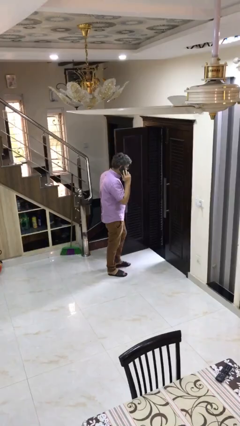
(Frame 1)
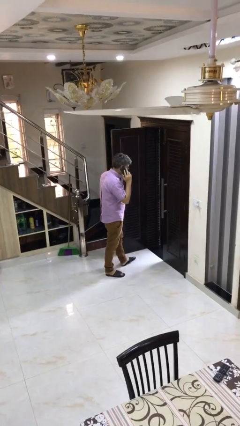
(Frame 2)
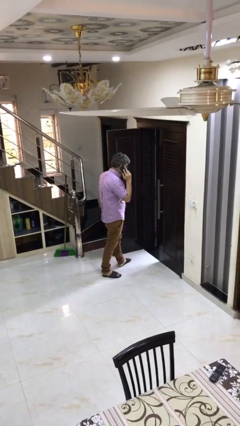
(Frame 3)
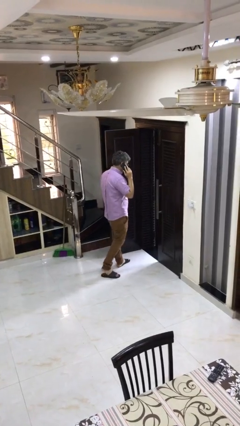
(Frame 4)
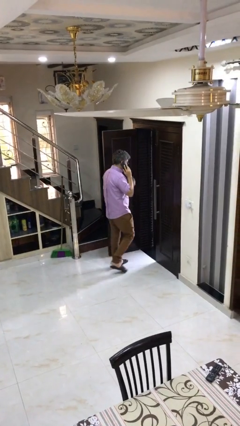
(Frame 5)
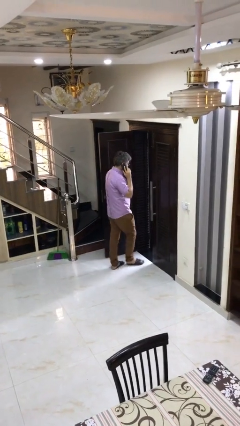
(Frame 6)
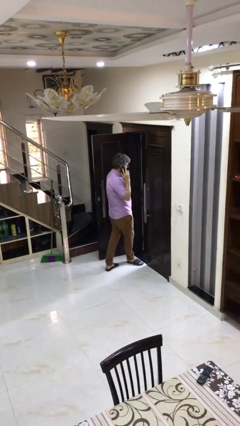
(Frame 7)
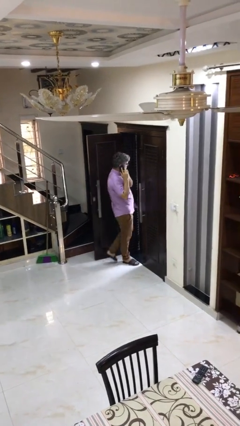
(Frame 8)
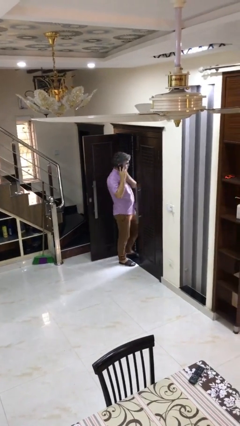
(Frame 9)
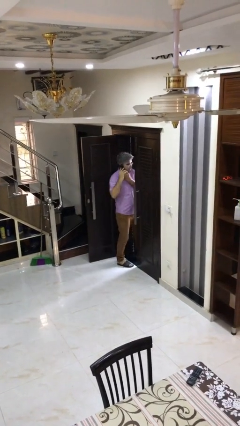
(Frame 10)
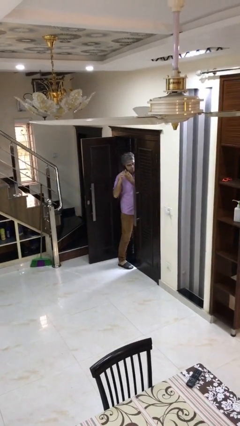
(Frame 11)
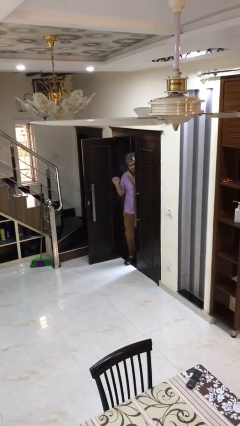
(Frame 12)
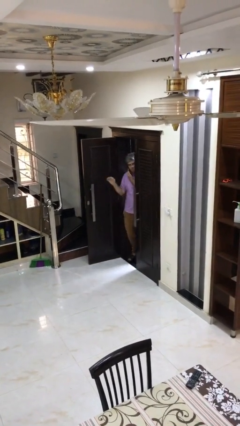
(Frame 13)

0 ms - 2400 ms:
person exits scene through structure

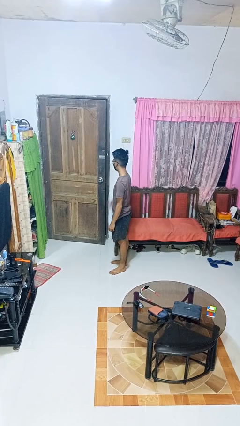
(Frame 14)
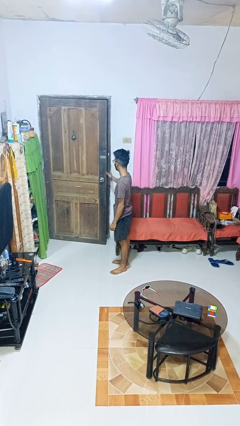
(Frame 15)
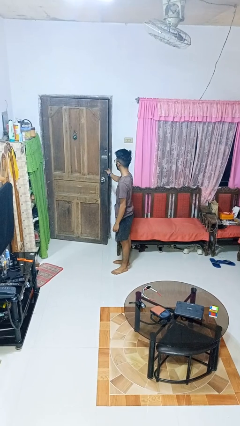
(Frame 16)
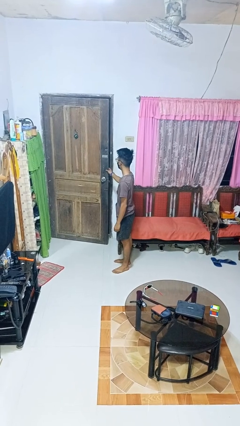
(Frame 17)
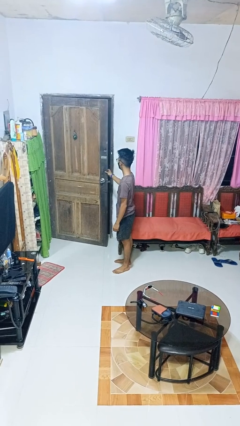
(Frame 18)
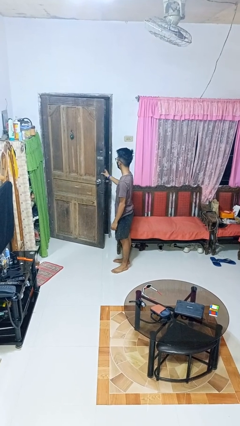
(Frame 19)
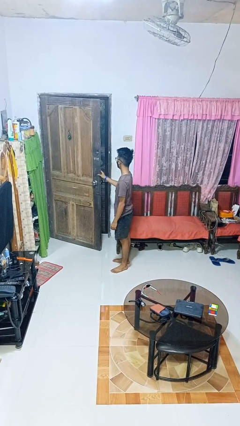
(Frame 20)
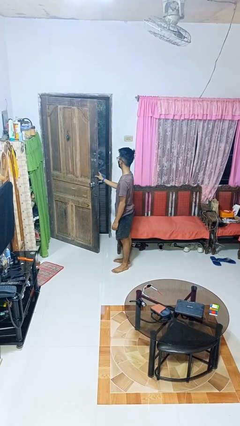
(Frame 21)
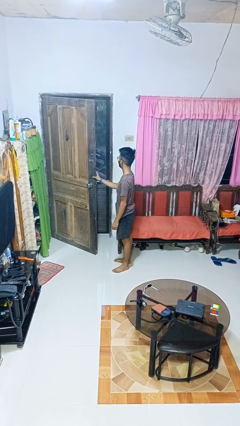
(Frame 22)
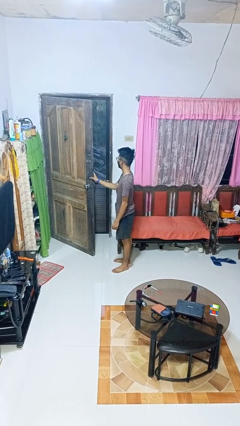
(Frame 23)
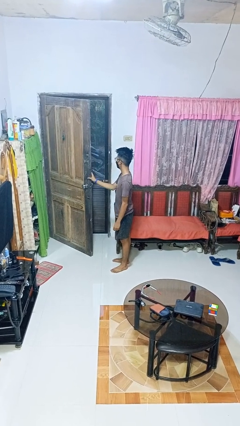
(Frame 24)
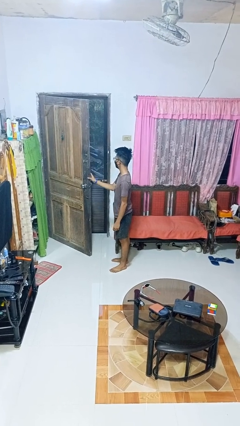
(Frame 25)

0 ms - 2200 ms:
person opens facility door

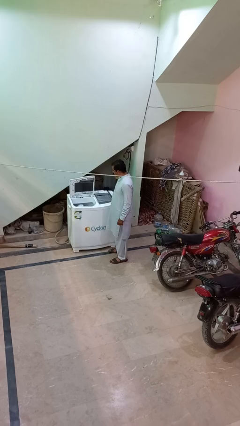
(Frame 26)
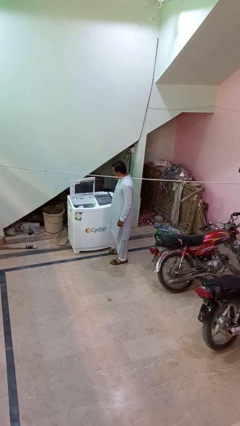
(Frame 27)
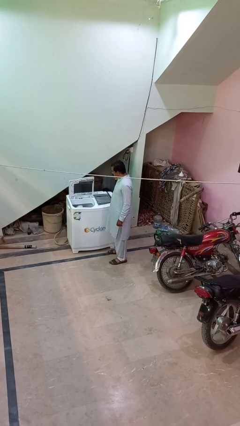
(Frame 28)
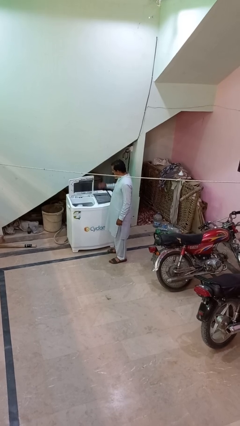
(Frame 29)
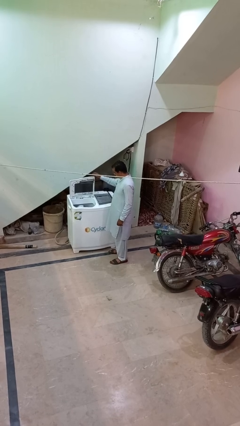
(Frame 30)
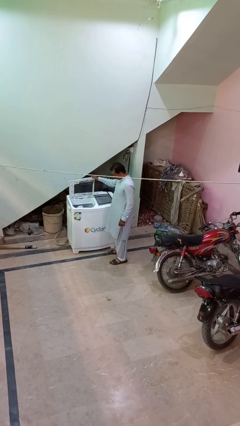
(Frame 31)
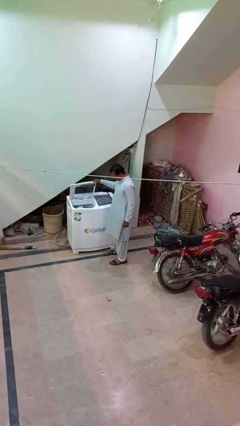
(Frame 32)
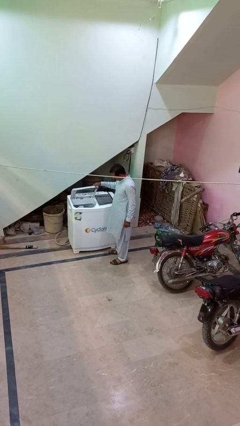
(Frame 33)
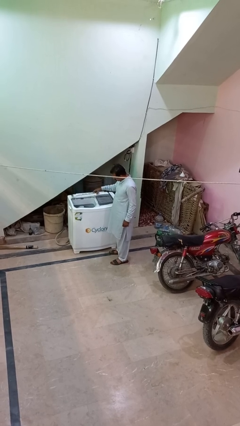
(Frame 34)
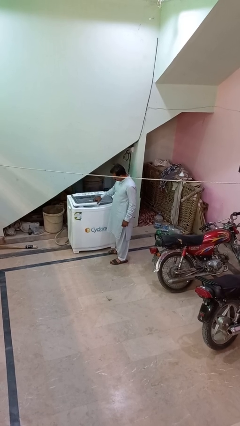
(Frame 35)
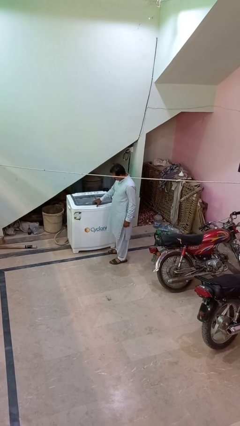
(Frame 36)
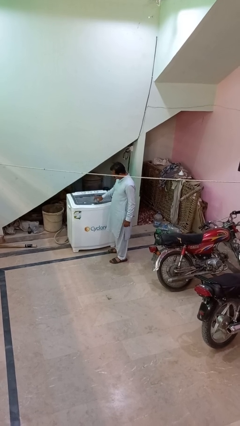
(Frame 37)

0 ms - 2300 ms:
person closes clothes washer

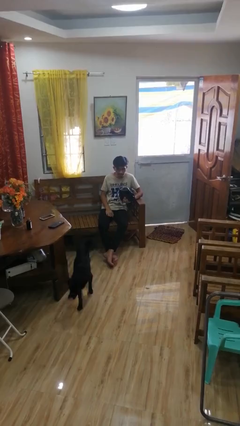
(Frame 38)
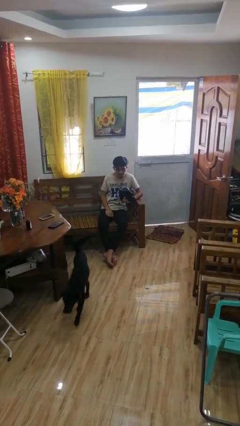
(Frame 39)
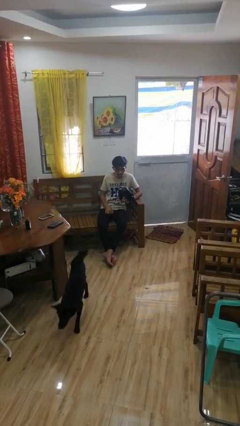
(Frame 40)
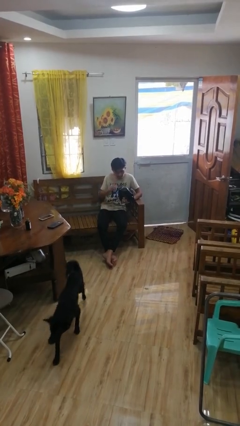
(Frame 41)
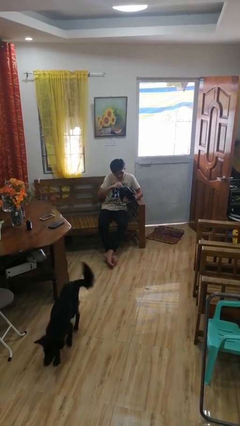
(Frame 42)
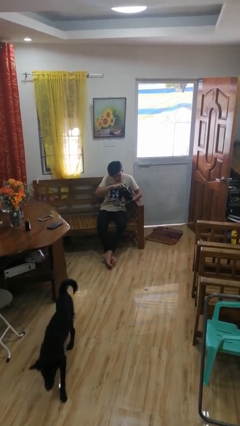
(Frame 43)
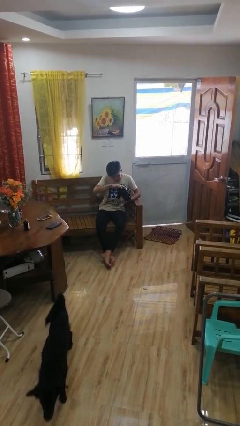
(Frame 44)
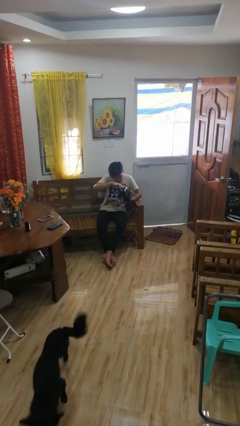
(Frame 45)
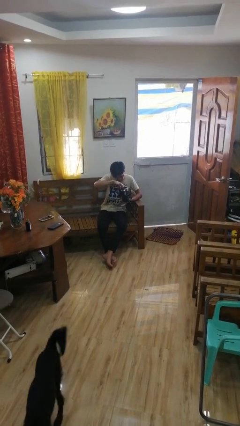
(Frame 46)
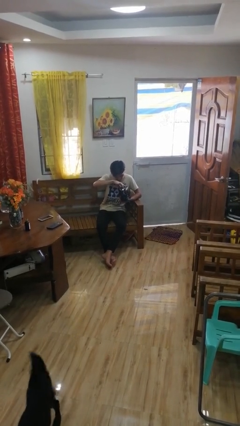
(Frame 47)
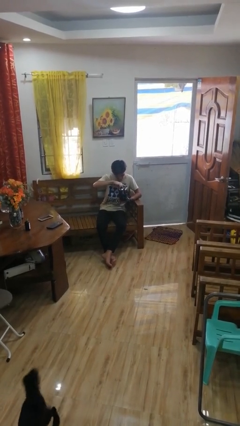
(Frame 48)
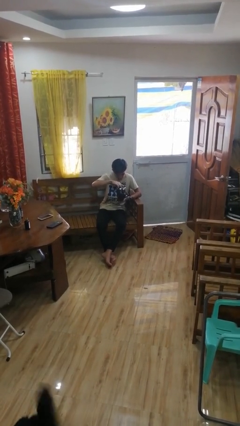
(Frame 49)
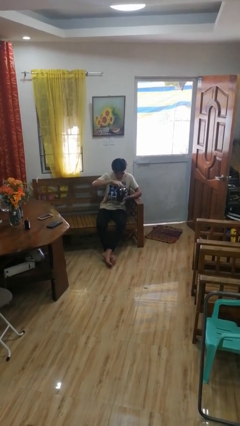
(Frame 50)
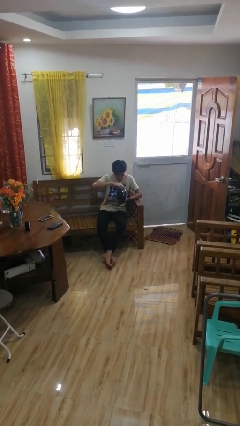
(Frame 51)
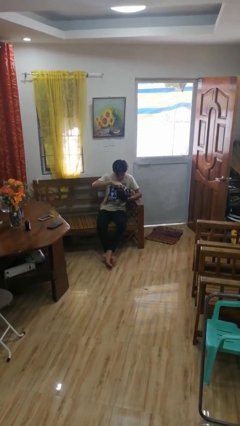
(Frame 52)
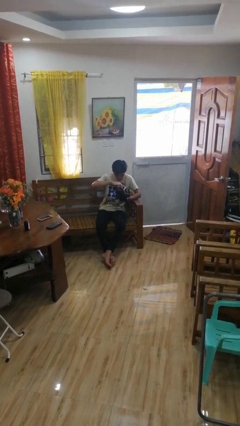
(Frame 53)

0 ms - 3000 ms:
person searches in purse

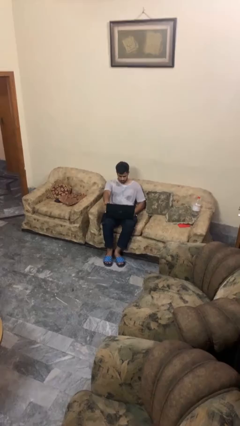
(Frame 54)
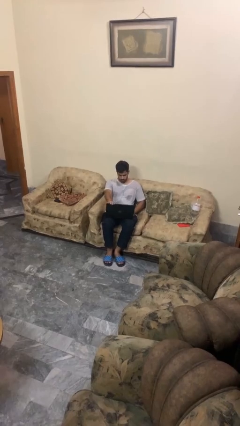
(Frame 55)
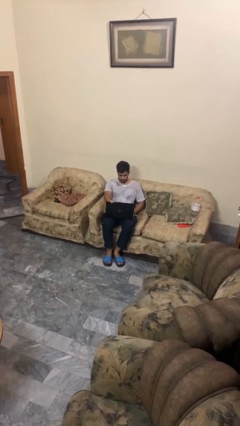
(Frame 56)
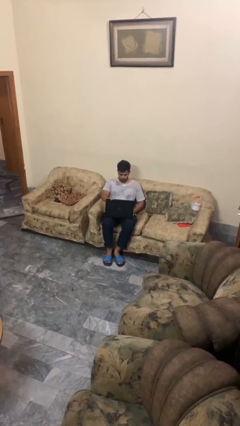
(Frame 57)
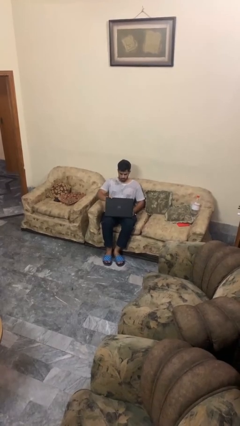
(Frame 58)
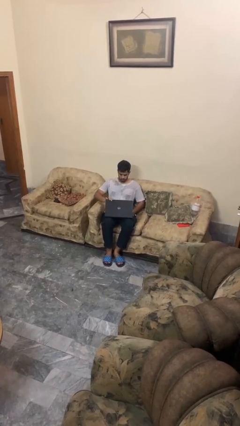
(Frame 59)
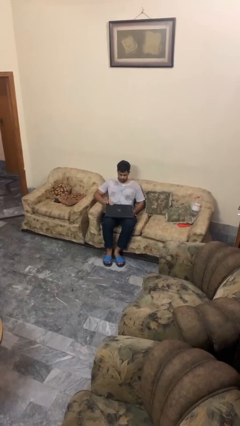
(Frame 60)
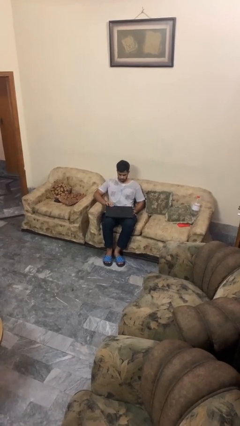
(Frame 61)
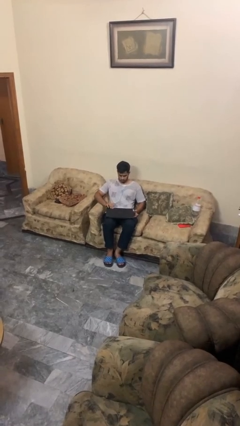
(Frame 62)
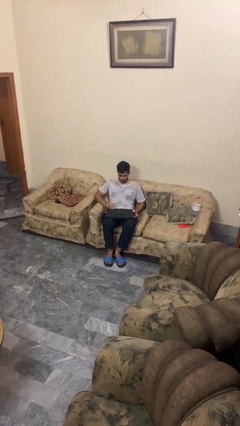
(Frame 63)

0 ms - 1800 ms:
person closes laptop

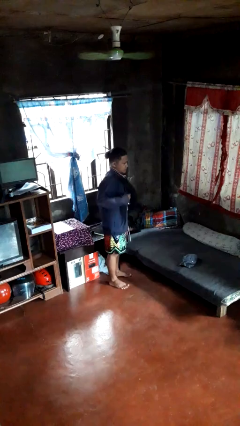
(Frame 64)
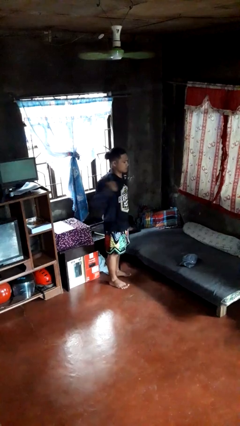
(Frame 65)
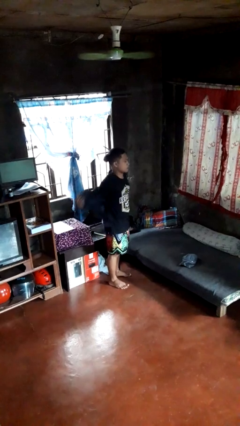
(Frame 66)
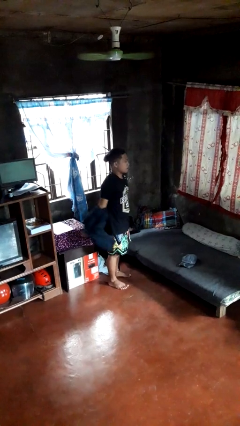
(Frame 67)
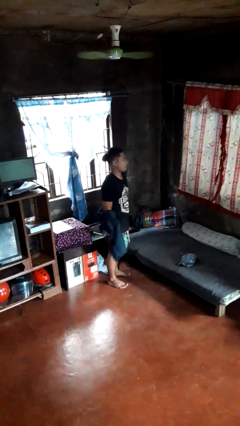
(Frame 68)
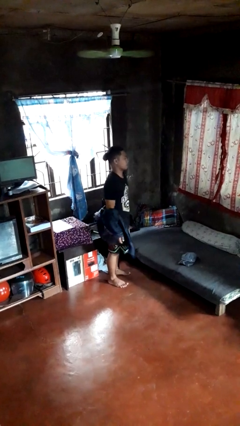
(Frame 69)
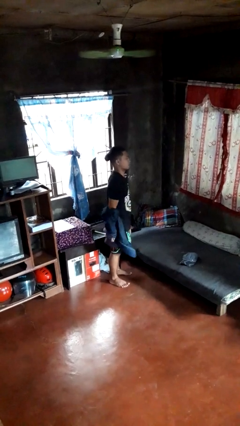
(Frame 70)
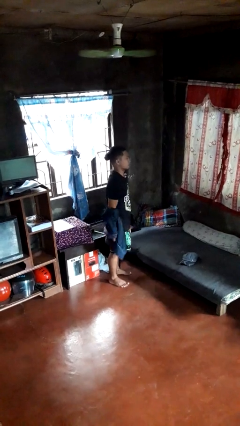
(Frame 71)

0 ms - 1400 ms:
person takes off jacket

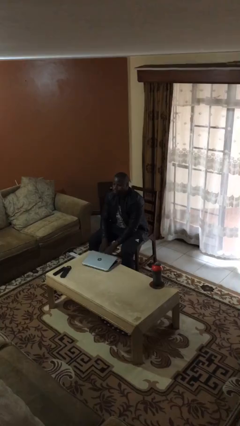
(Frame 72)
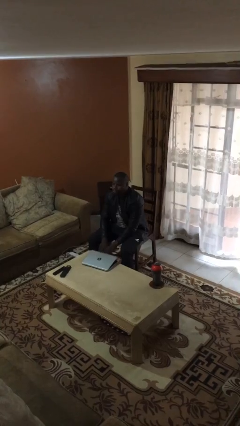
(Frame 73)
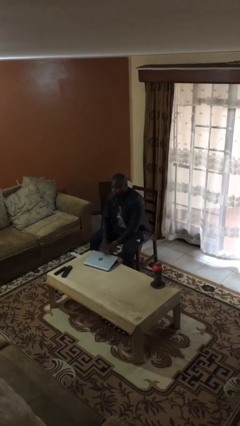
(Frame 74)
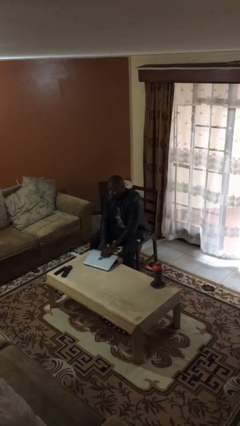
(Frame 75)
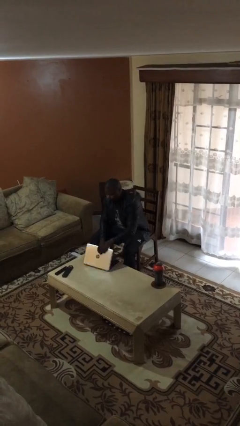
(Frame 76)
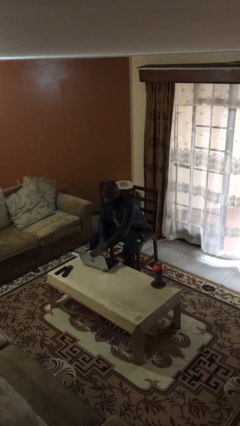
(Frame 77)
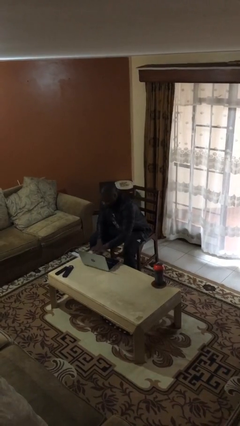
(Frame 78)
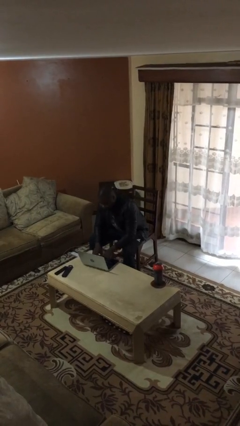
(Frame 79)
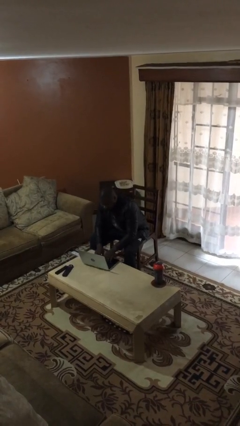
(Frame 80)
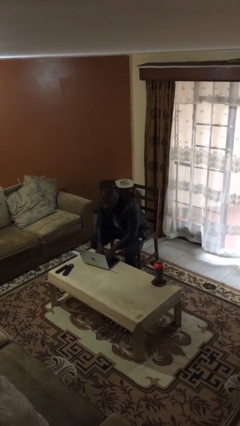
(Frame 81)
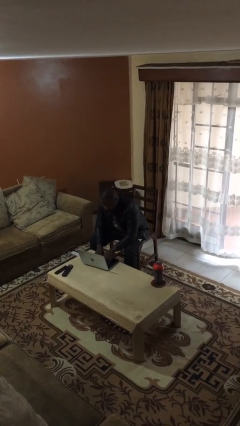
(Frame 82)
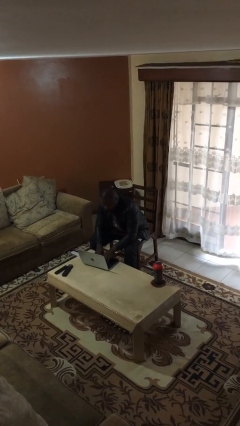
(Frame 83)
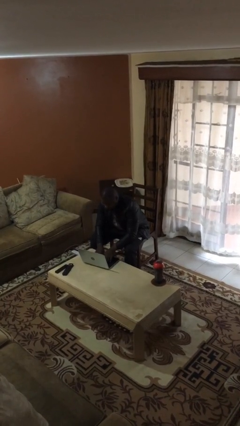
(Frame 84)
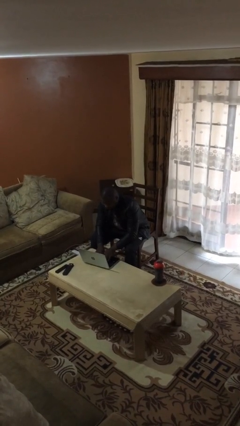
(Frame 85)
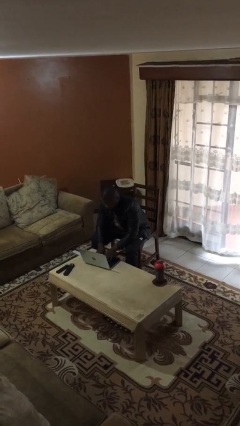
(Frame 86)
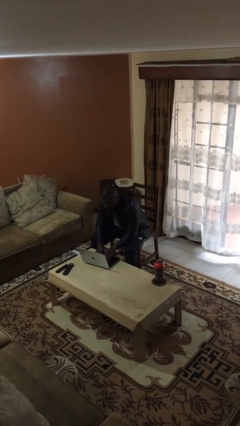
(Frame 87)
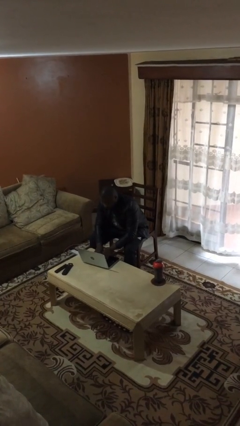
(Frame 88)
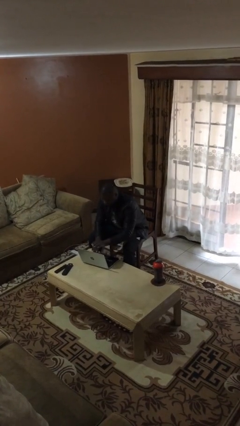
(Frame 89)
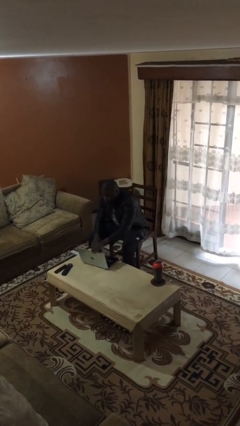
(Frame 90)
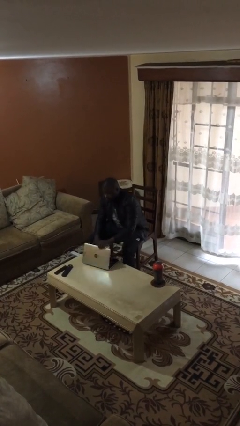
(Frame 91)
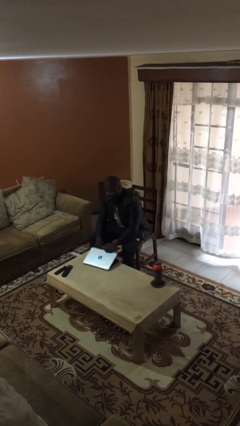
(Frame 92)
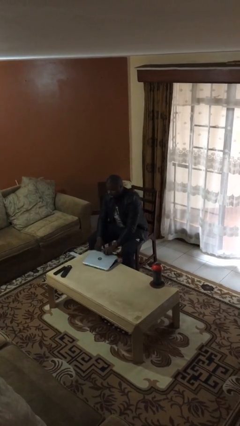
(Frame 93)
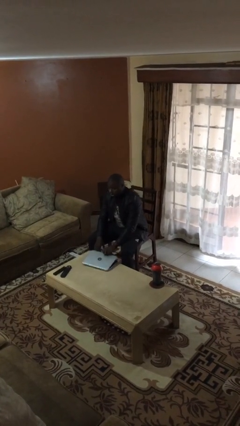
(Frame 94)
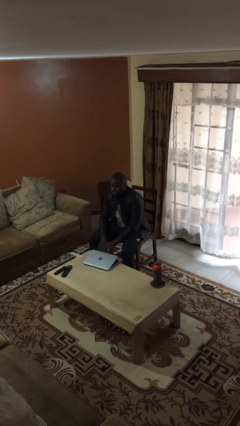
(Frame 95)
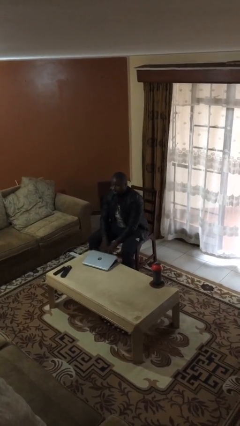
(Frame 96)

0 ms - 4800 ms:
person interacts with laptop
